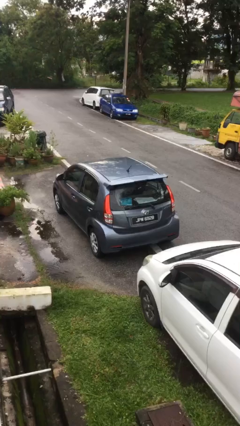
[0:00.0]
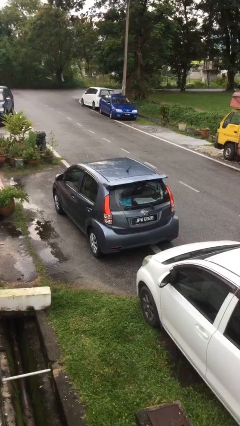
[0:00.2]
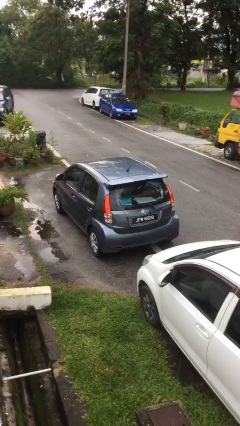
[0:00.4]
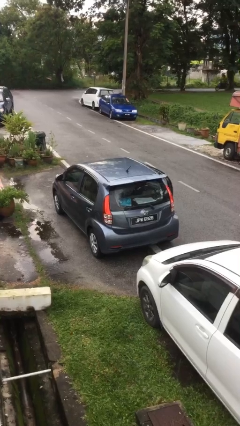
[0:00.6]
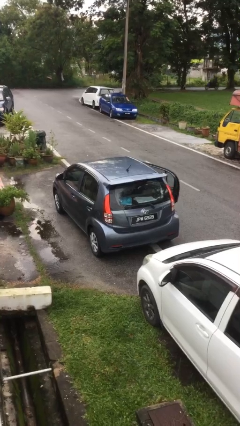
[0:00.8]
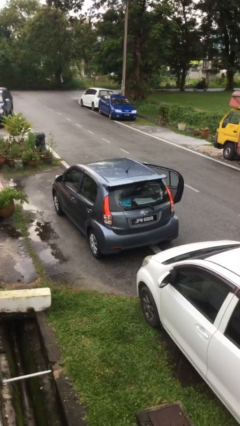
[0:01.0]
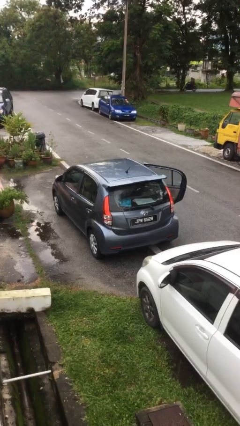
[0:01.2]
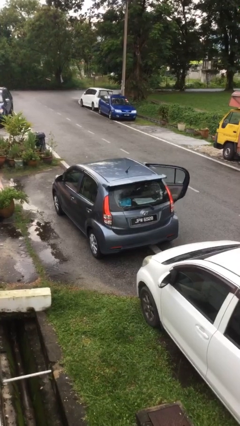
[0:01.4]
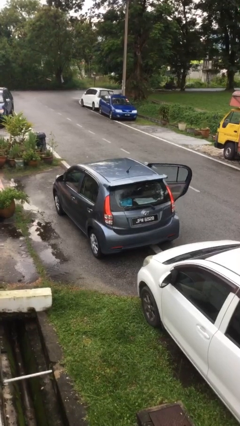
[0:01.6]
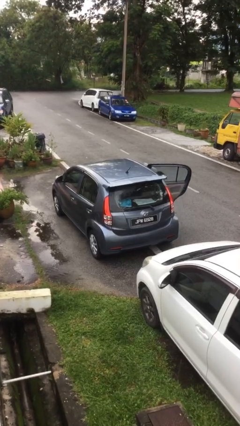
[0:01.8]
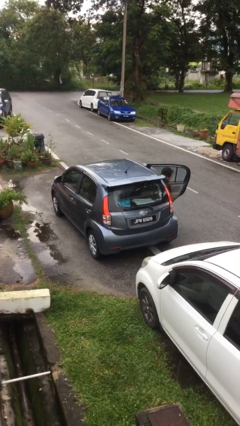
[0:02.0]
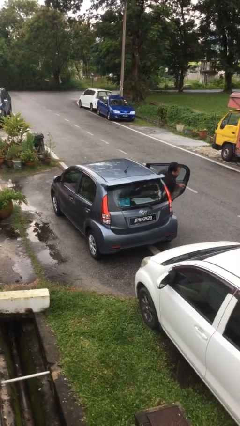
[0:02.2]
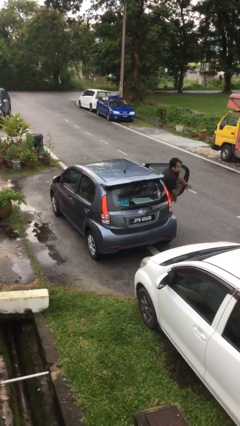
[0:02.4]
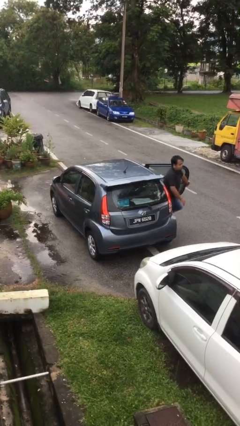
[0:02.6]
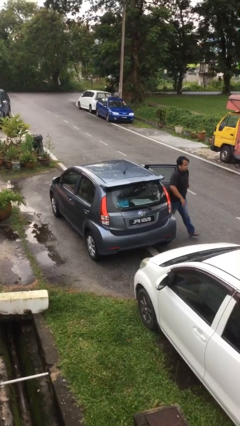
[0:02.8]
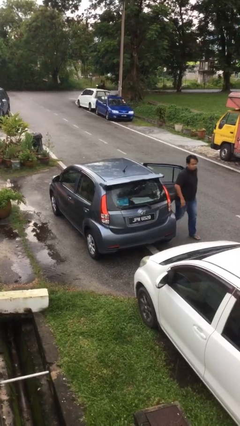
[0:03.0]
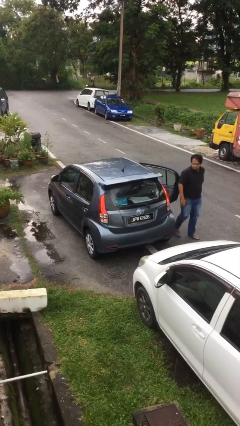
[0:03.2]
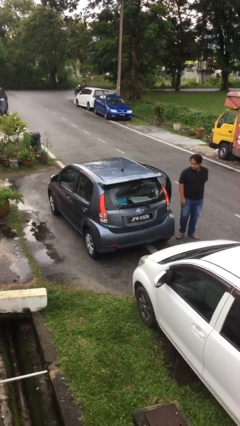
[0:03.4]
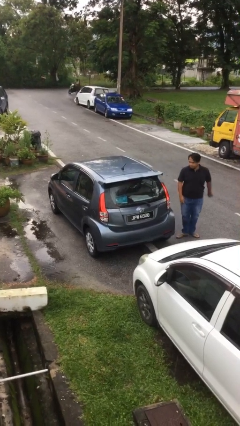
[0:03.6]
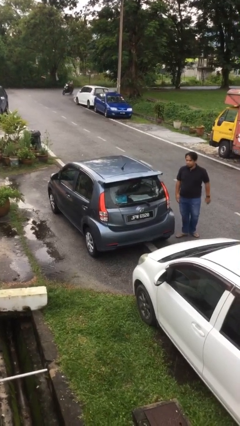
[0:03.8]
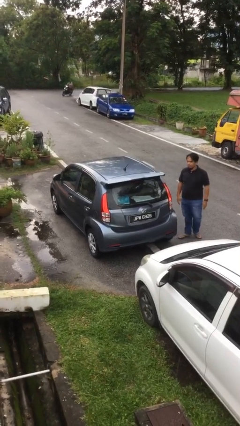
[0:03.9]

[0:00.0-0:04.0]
car drops off person

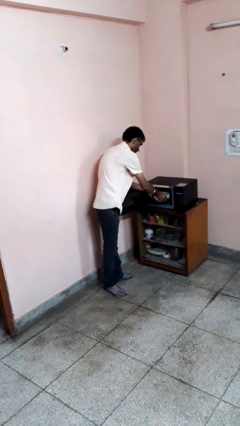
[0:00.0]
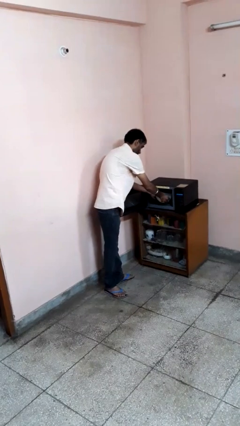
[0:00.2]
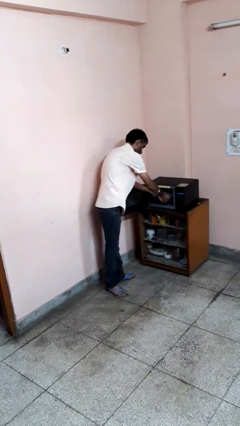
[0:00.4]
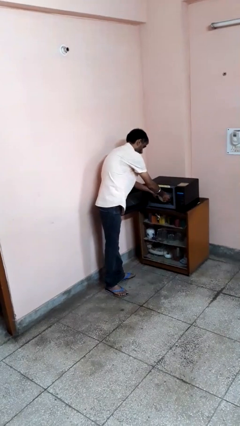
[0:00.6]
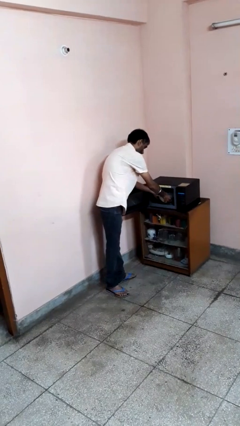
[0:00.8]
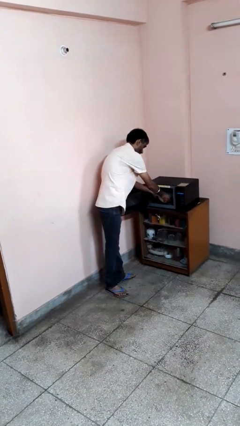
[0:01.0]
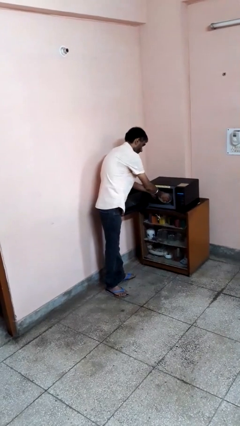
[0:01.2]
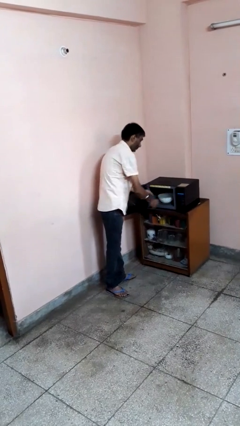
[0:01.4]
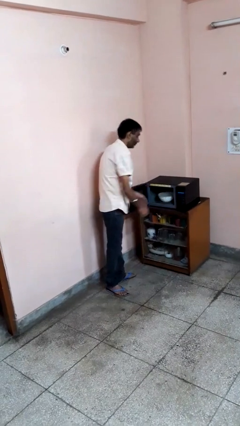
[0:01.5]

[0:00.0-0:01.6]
person puts object into microwave

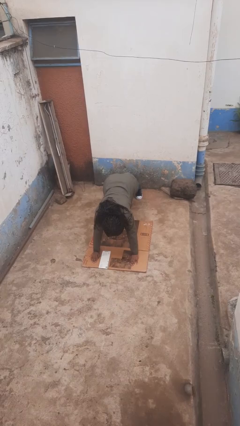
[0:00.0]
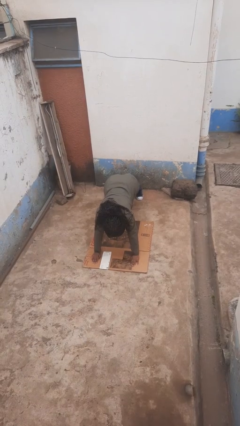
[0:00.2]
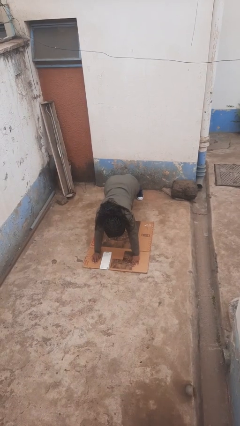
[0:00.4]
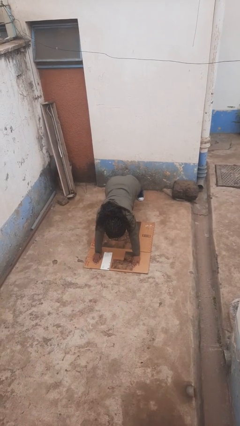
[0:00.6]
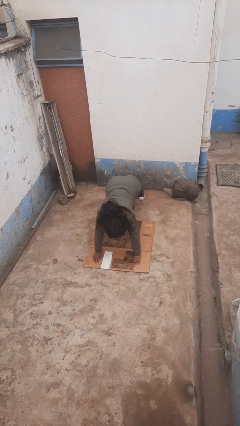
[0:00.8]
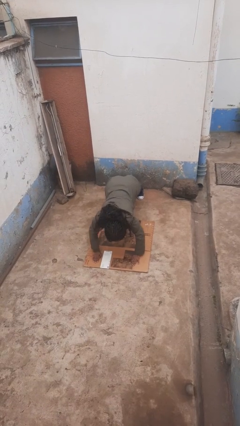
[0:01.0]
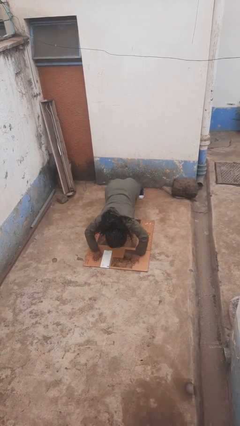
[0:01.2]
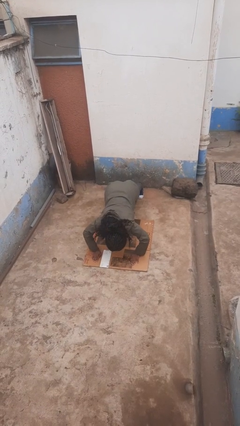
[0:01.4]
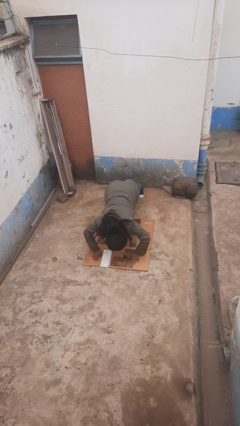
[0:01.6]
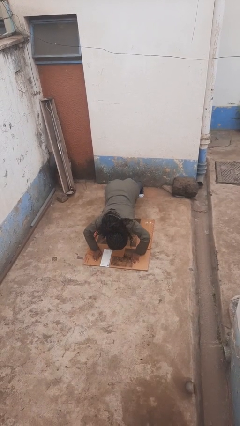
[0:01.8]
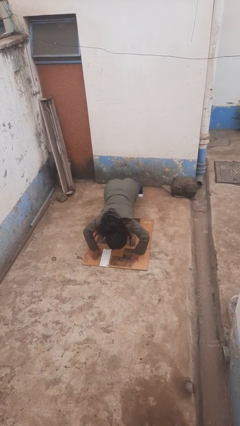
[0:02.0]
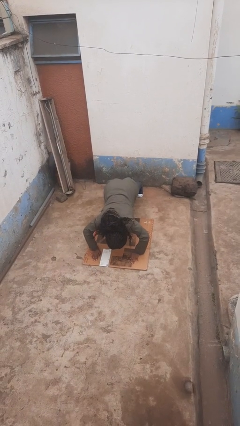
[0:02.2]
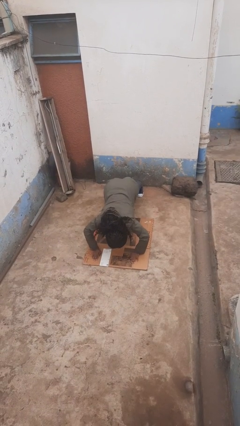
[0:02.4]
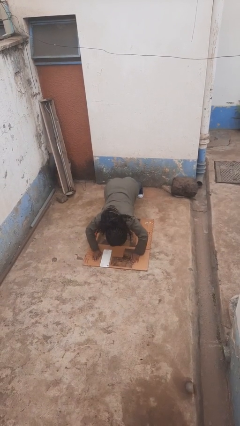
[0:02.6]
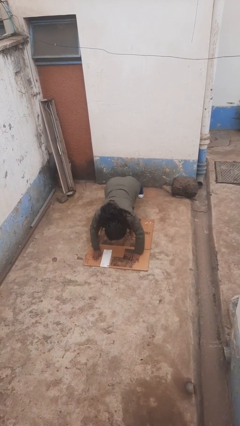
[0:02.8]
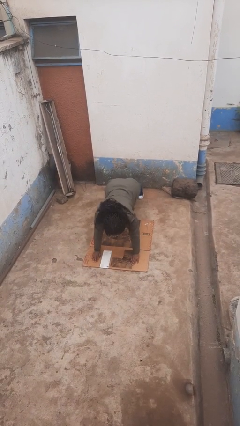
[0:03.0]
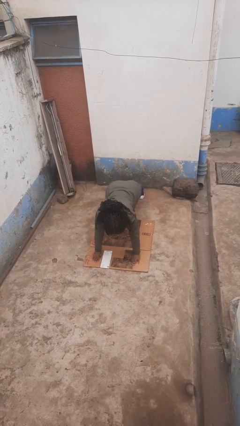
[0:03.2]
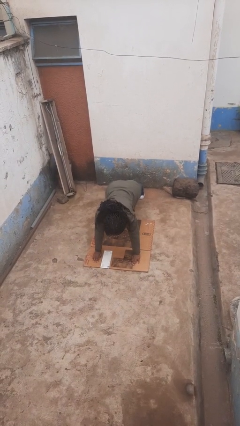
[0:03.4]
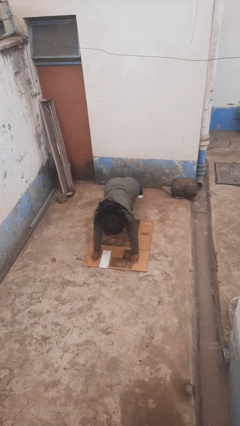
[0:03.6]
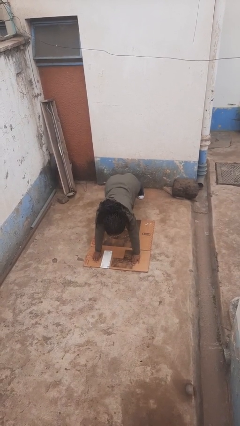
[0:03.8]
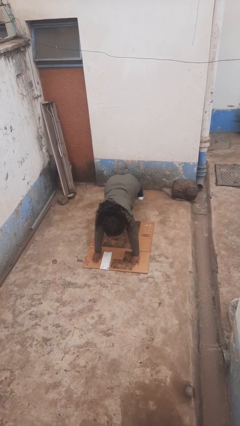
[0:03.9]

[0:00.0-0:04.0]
person exercises with pushup

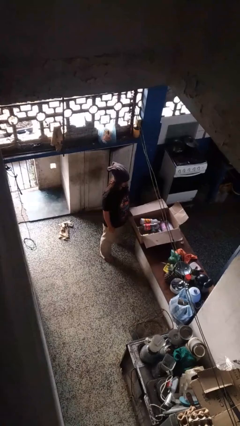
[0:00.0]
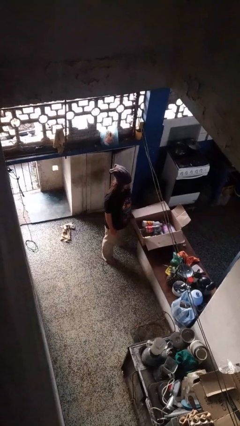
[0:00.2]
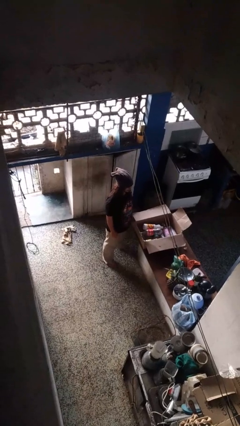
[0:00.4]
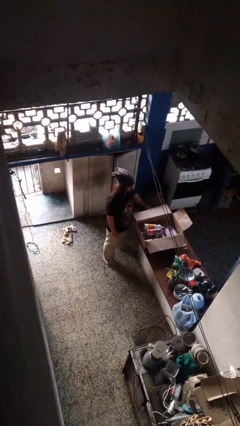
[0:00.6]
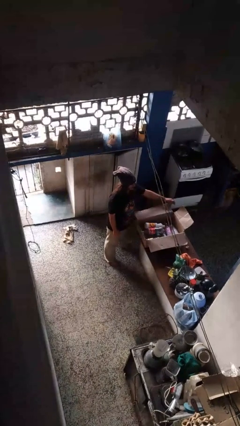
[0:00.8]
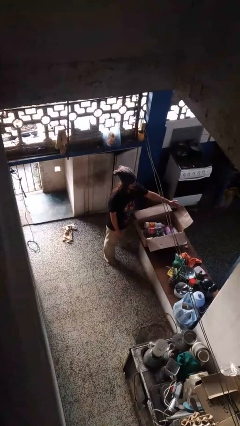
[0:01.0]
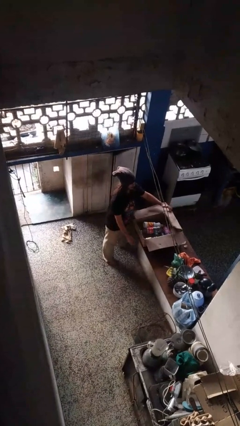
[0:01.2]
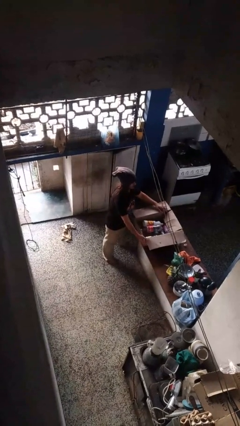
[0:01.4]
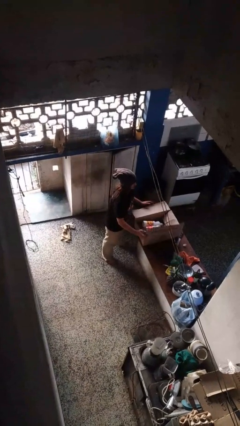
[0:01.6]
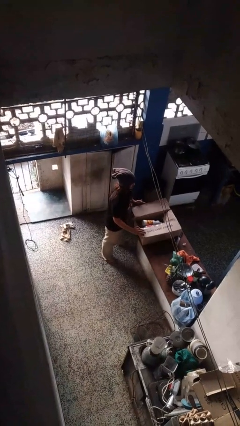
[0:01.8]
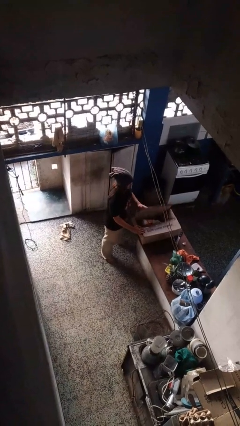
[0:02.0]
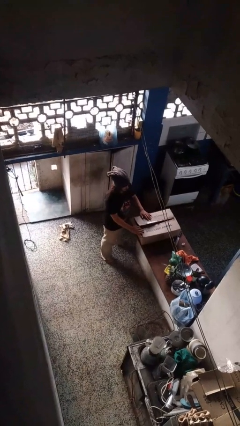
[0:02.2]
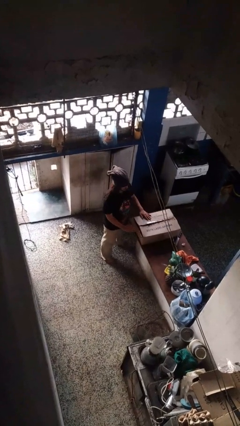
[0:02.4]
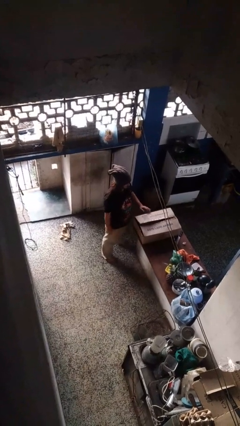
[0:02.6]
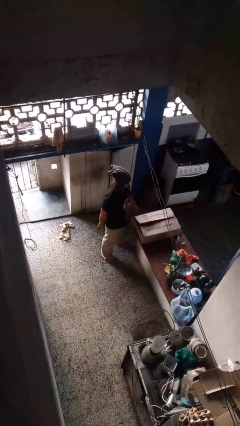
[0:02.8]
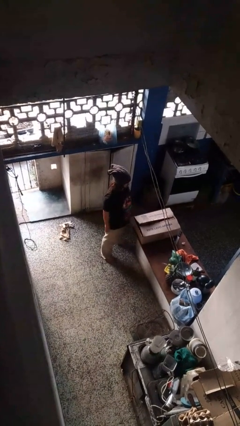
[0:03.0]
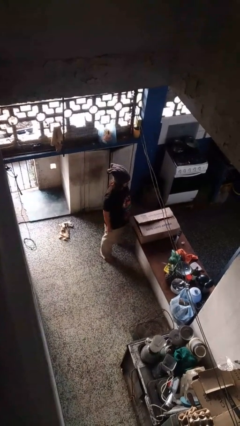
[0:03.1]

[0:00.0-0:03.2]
person closes box

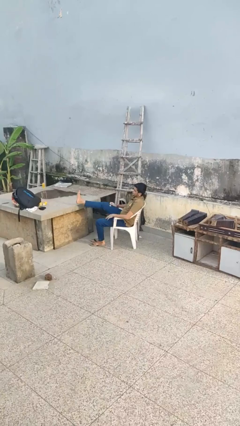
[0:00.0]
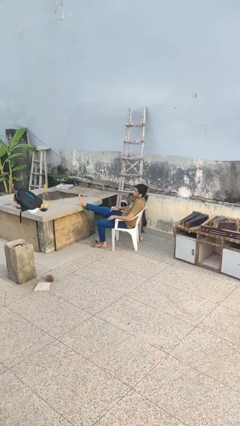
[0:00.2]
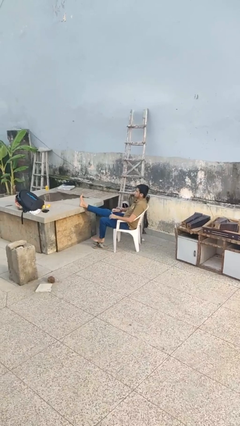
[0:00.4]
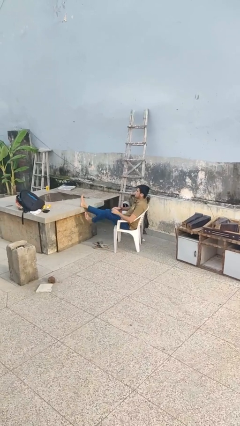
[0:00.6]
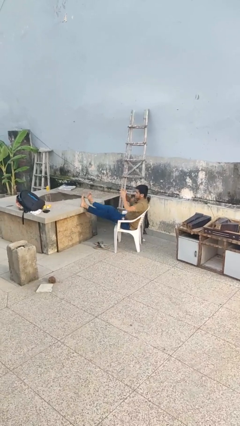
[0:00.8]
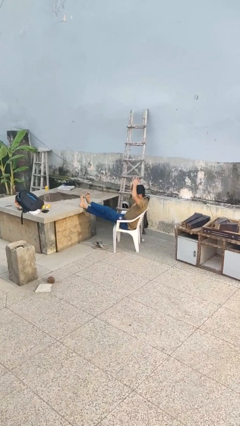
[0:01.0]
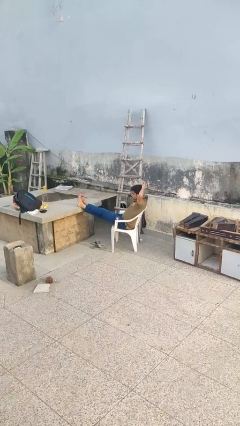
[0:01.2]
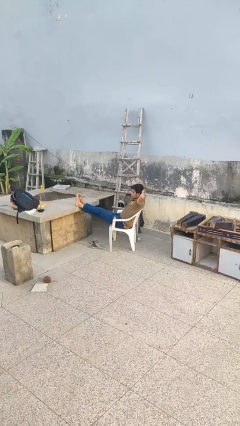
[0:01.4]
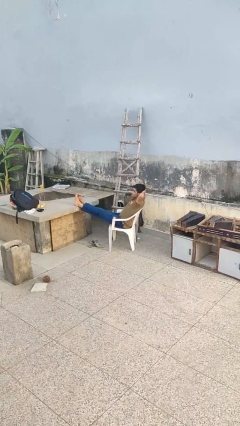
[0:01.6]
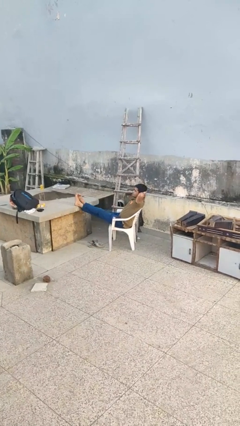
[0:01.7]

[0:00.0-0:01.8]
person puts feet up

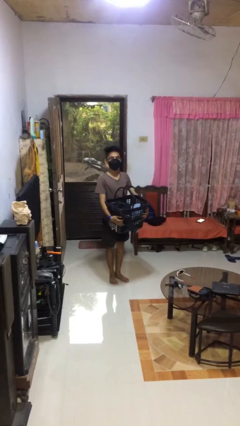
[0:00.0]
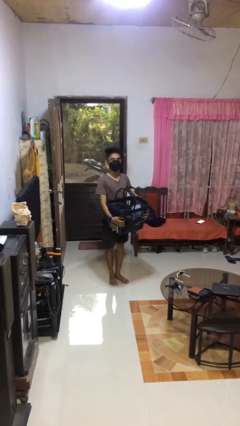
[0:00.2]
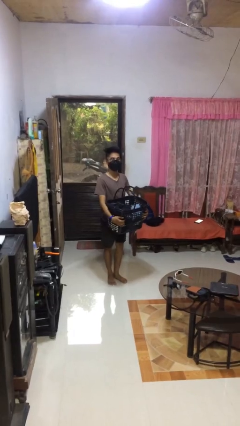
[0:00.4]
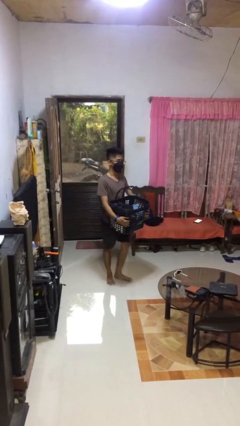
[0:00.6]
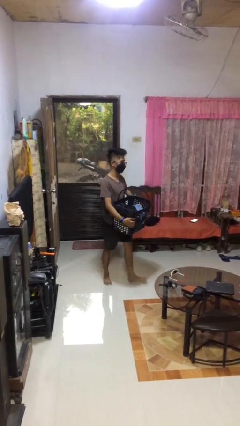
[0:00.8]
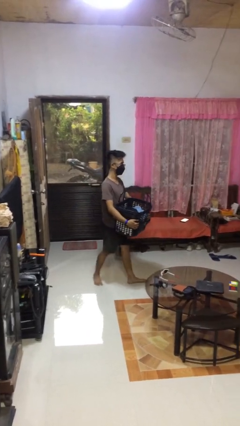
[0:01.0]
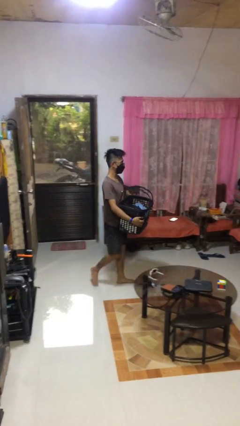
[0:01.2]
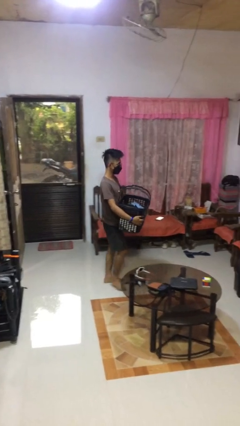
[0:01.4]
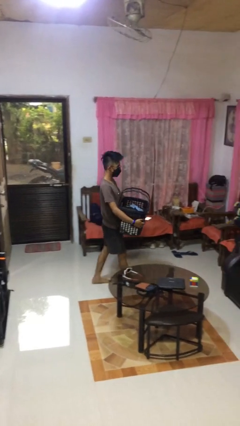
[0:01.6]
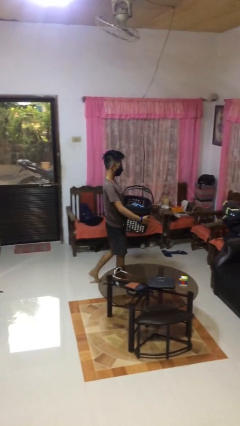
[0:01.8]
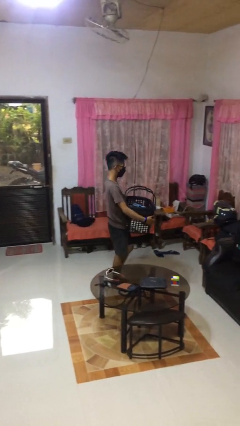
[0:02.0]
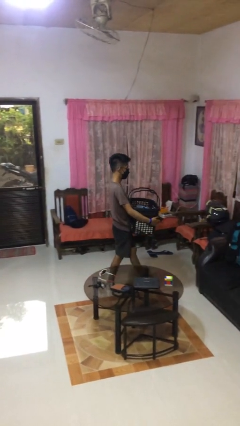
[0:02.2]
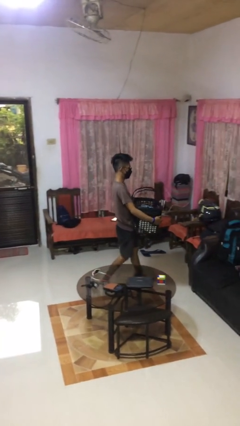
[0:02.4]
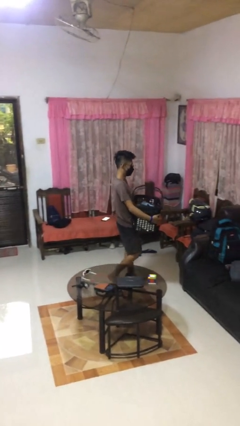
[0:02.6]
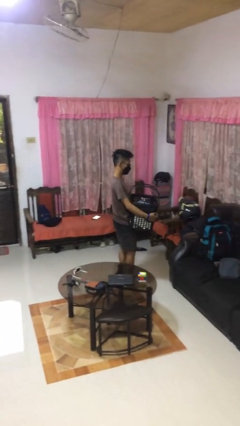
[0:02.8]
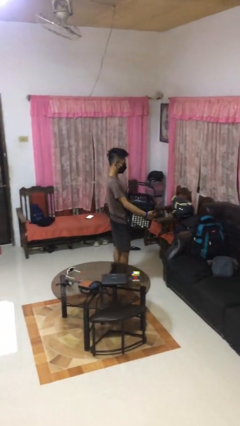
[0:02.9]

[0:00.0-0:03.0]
person carries laundry basket
